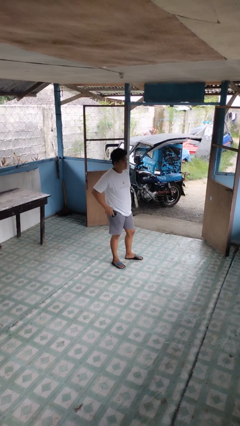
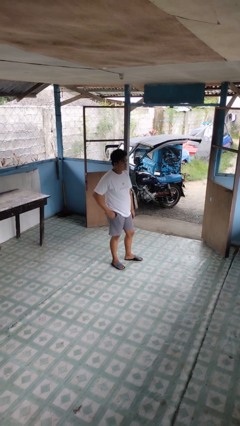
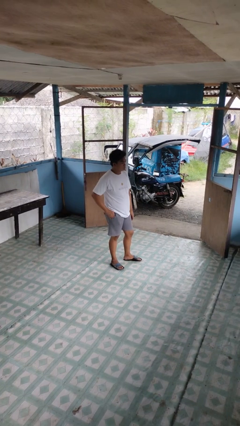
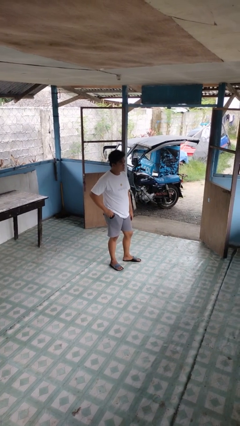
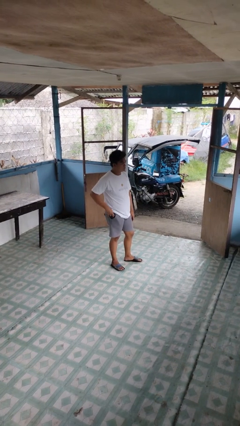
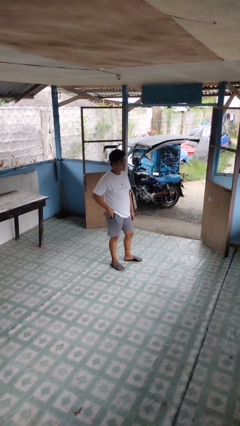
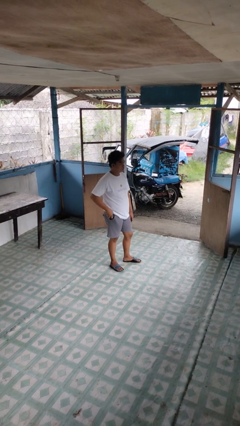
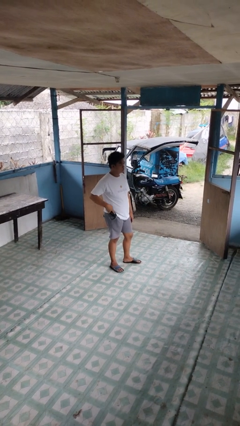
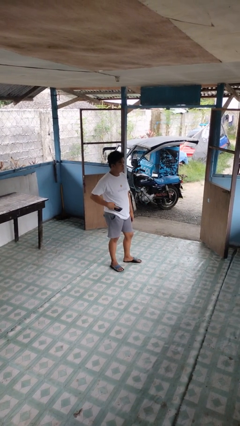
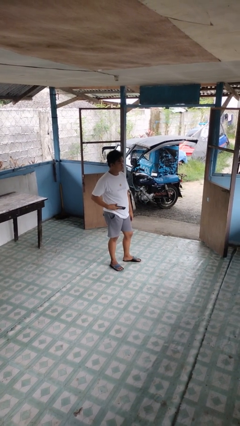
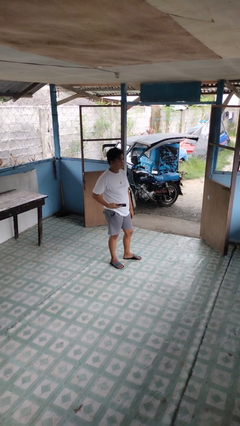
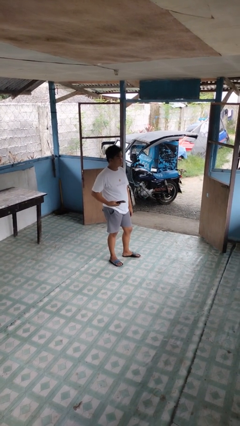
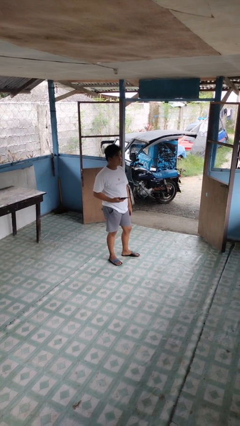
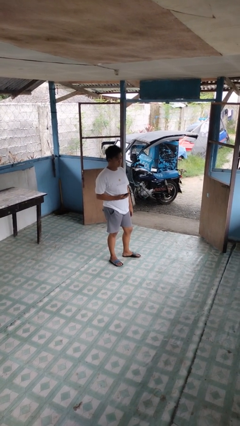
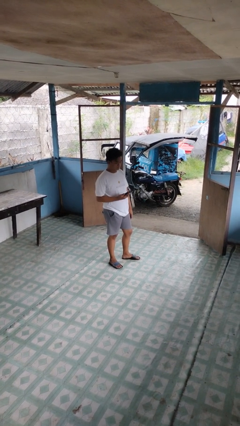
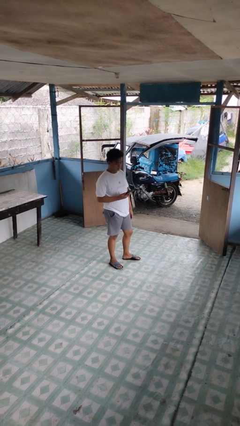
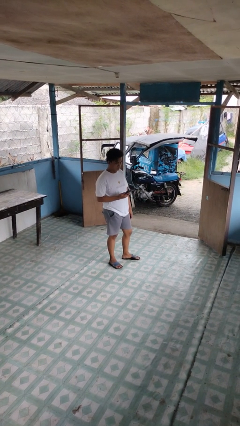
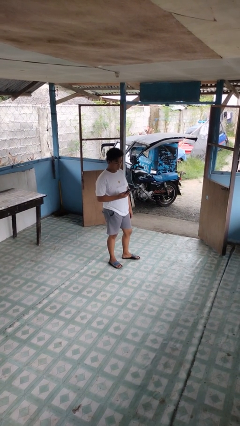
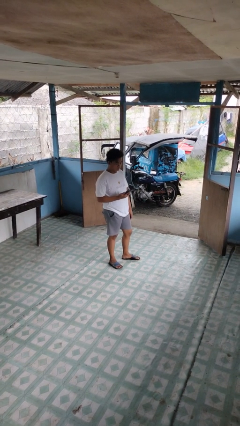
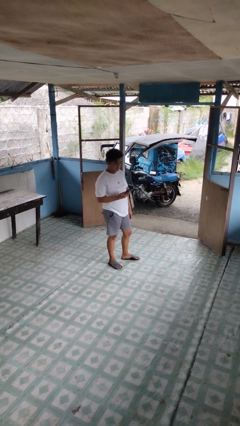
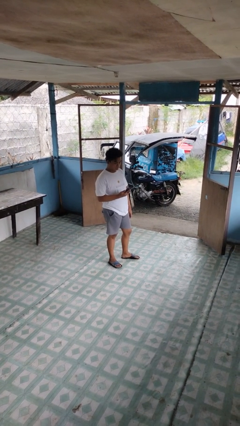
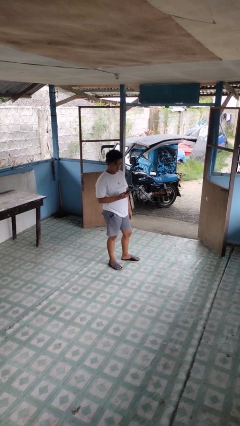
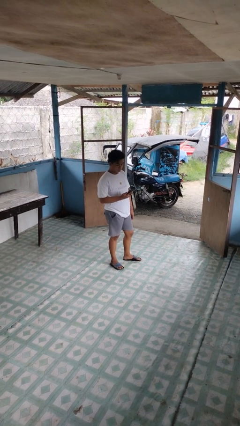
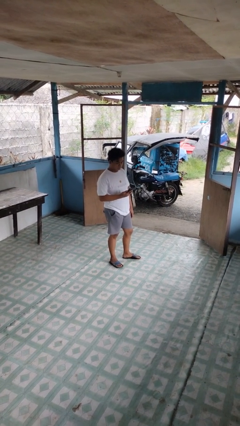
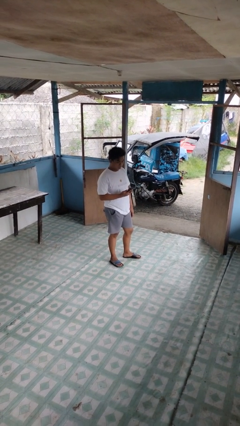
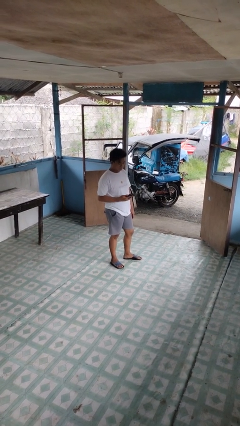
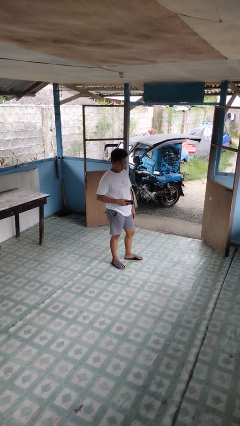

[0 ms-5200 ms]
person takes phone from pocket

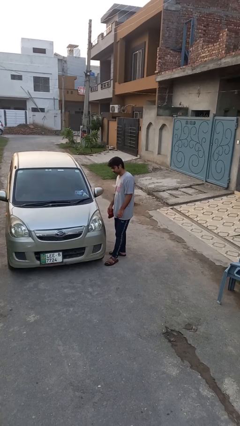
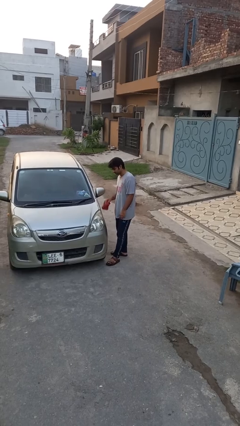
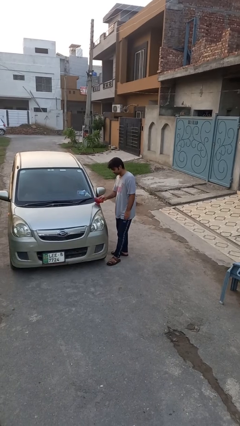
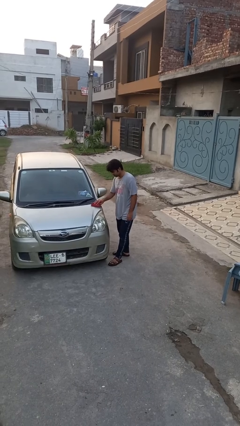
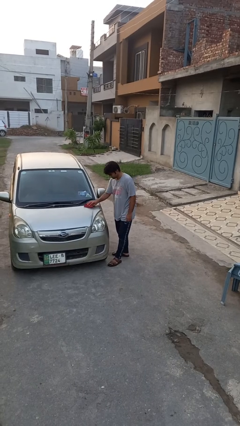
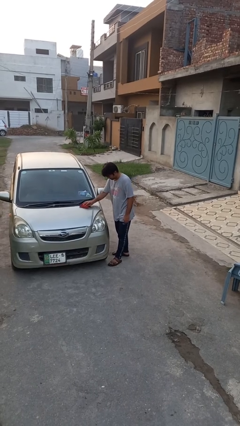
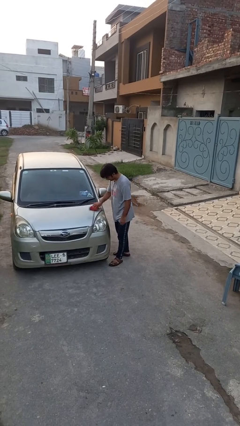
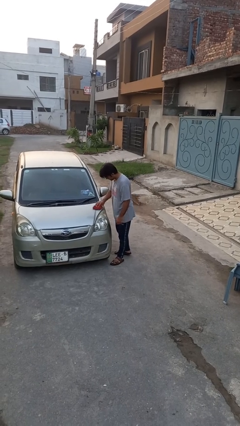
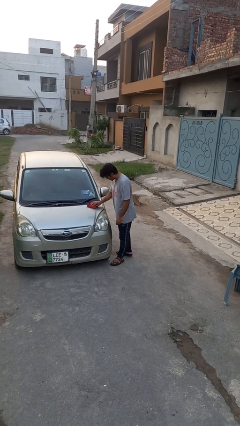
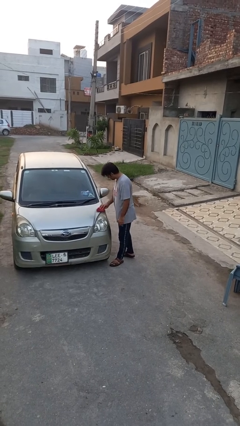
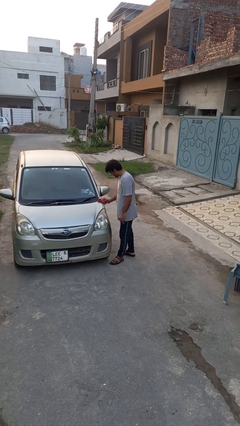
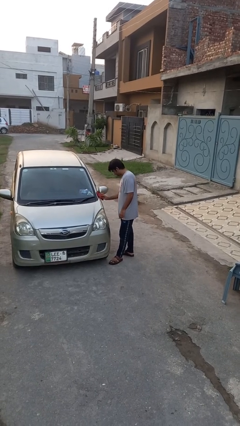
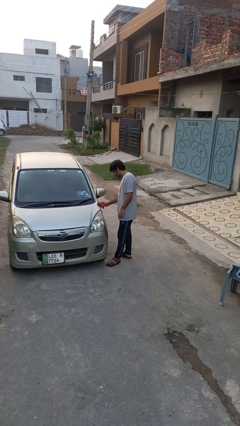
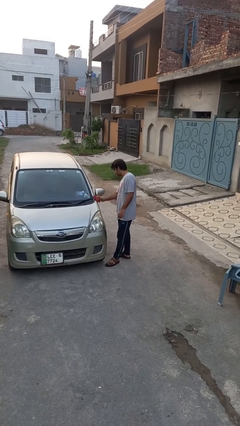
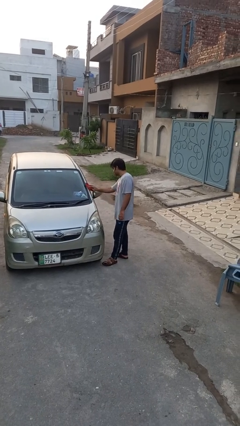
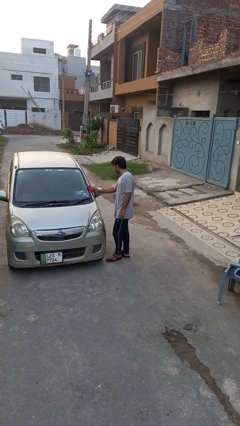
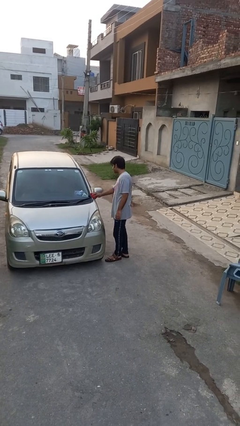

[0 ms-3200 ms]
person polishes car with rag

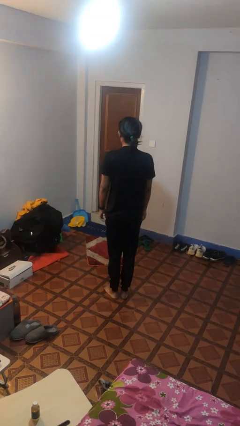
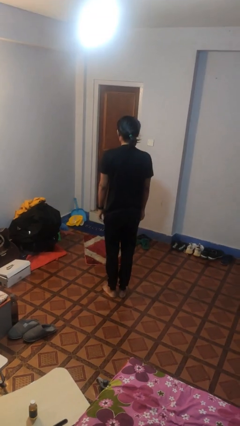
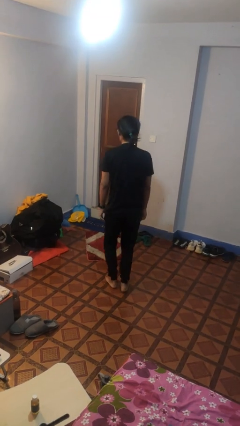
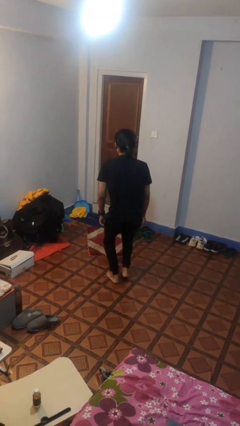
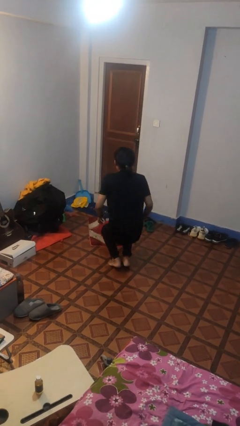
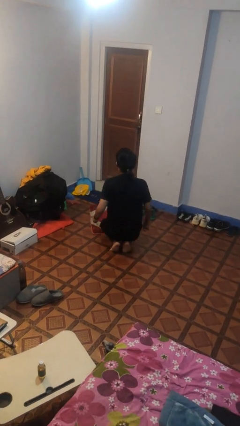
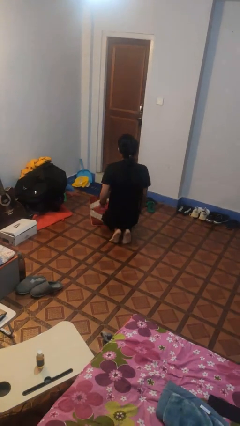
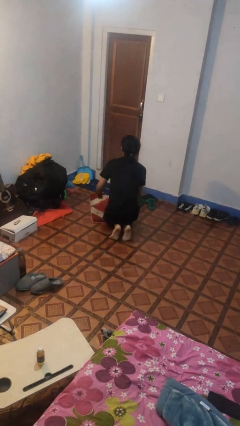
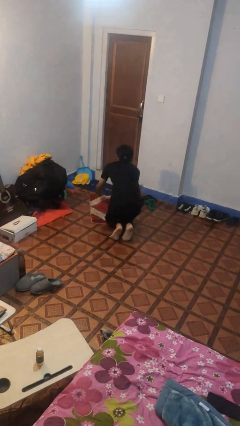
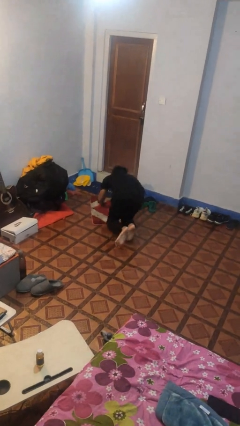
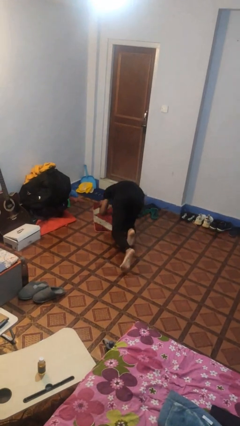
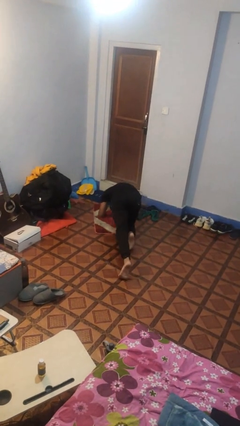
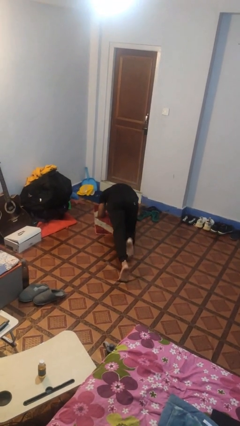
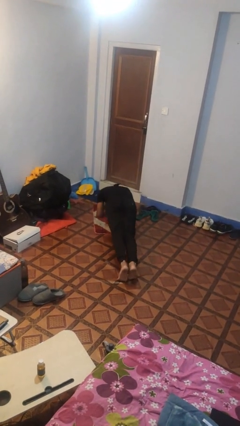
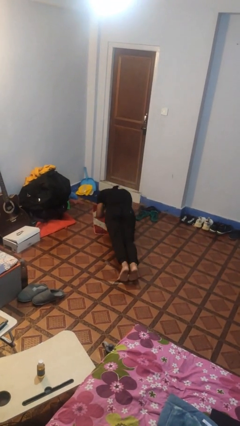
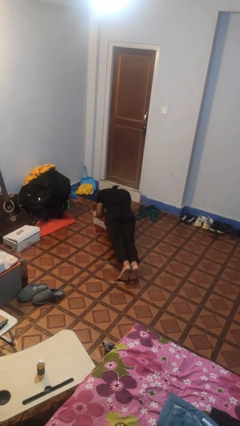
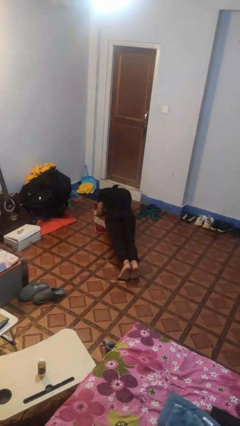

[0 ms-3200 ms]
person exercises with plank

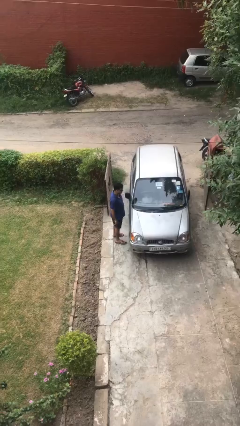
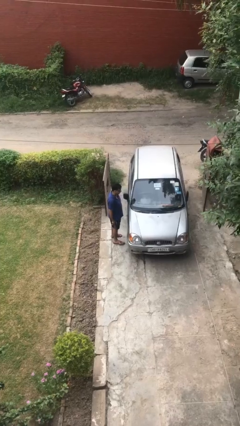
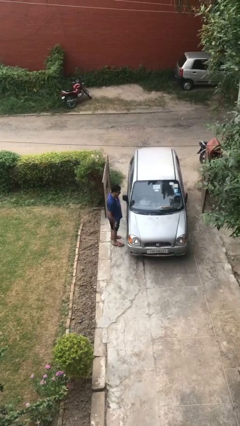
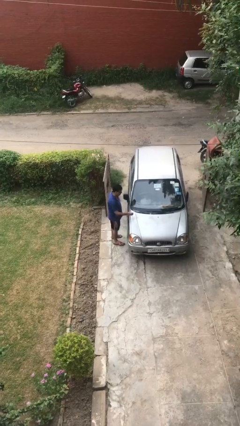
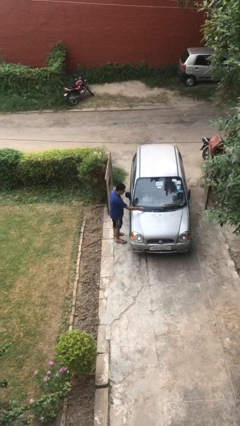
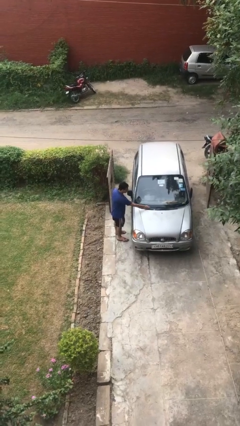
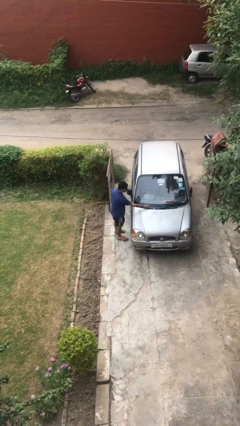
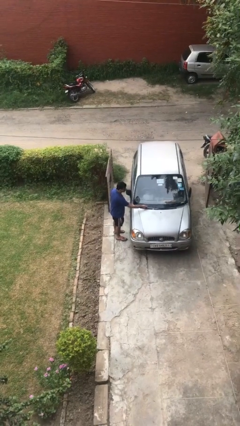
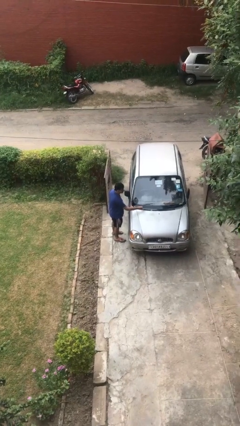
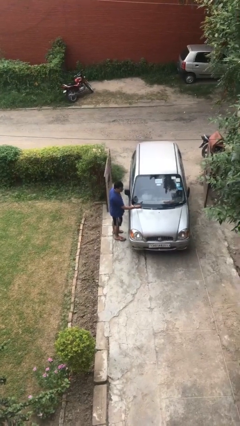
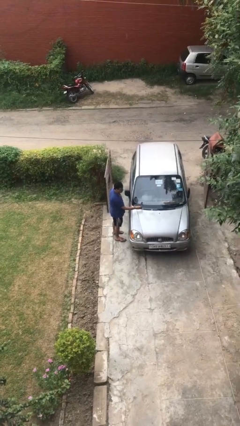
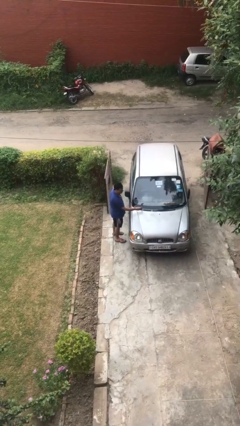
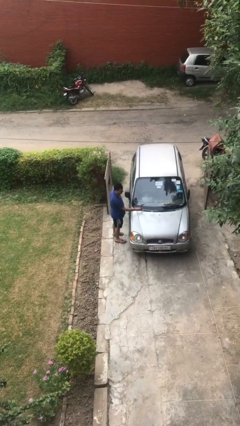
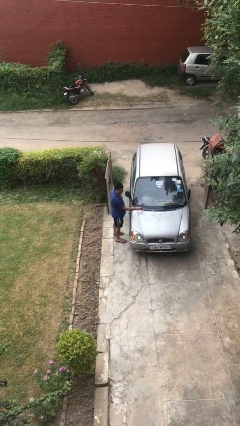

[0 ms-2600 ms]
person flips up car wipers

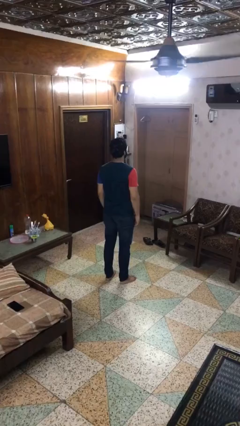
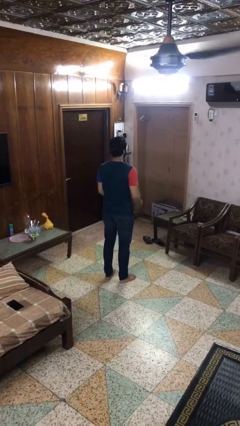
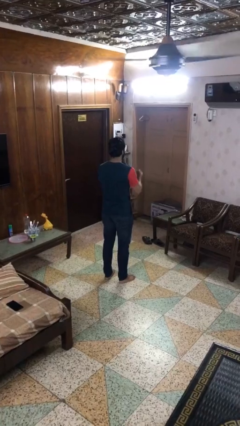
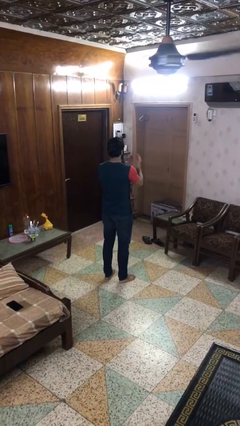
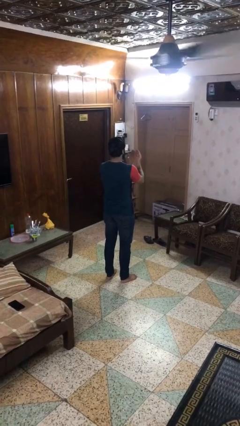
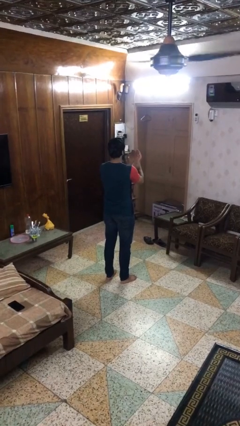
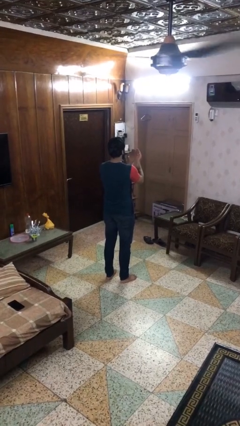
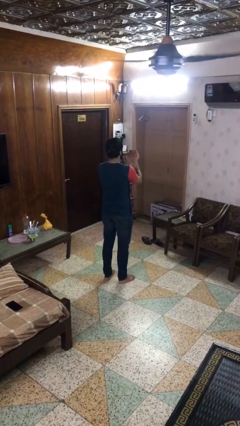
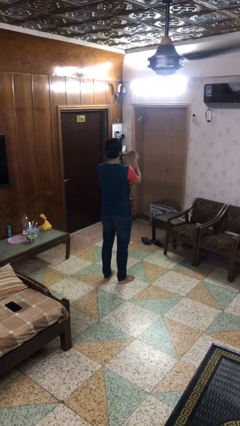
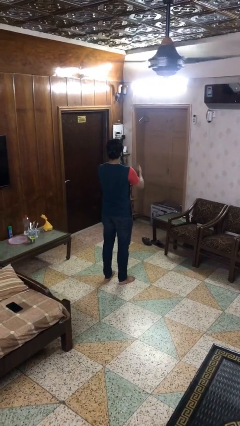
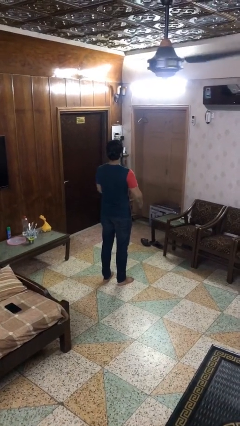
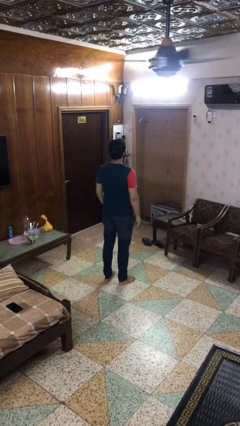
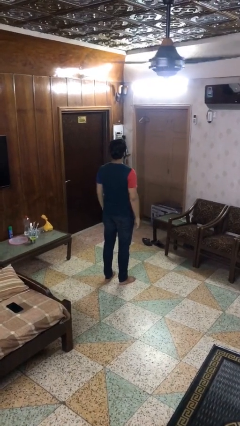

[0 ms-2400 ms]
person prays

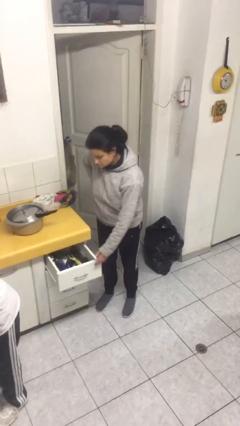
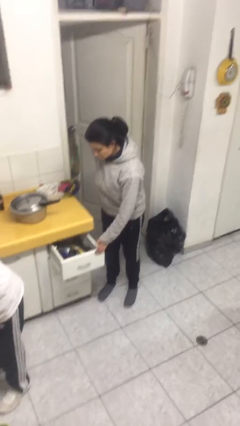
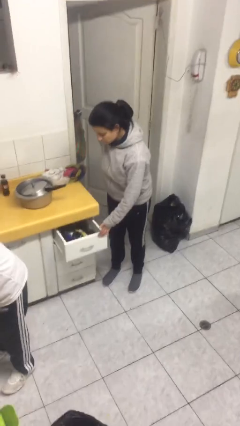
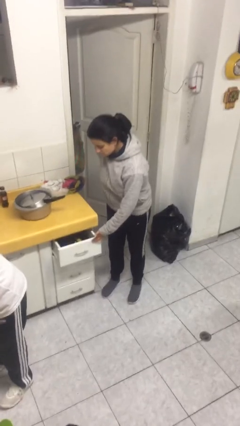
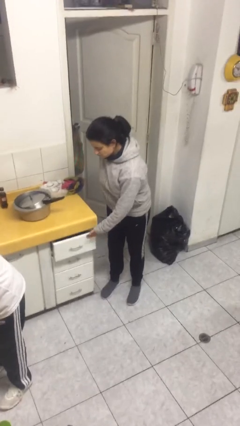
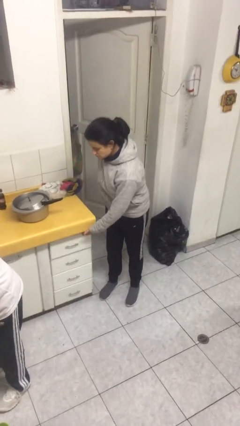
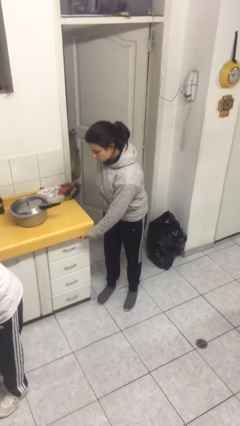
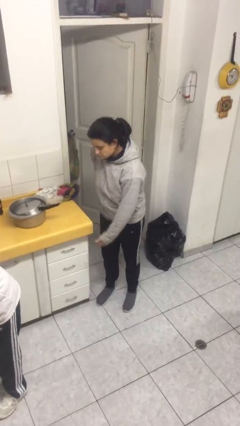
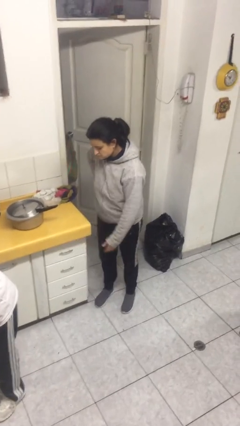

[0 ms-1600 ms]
person closes kitchen drawer
